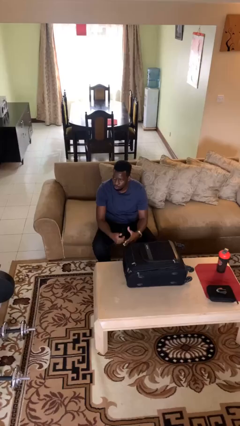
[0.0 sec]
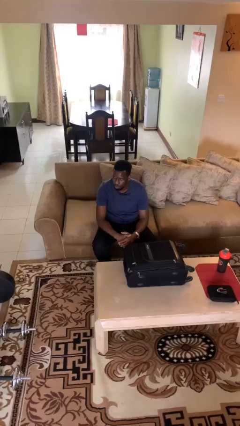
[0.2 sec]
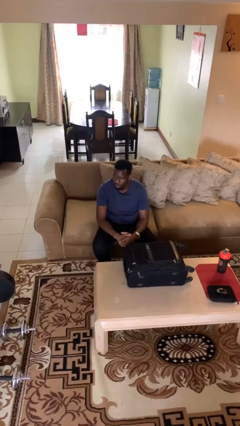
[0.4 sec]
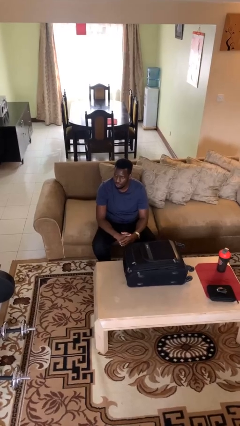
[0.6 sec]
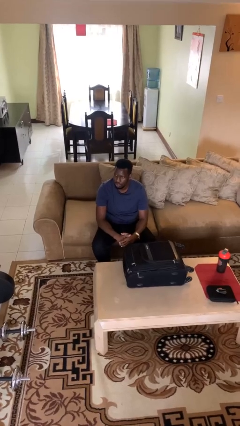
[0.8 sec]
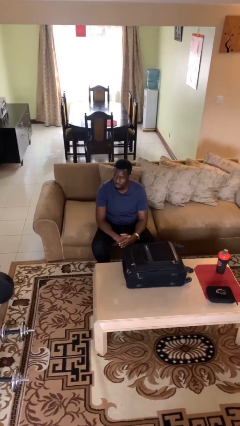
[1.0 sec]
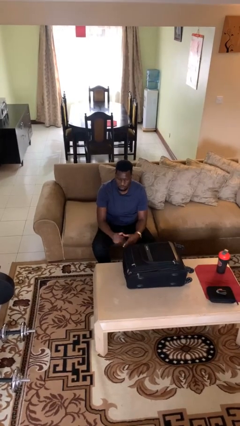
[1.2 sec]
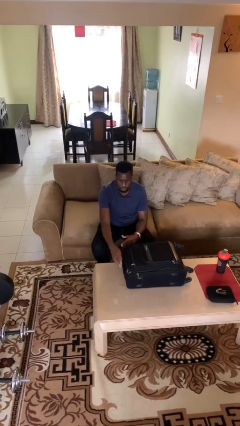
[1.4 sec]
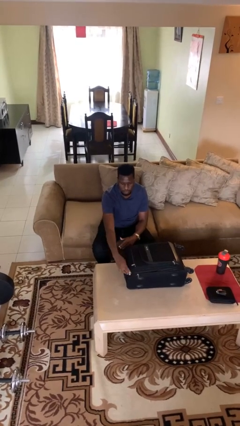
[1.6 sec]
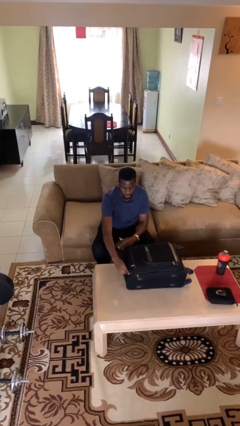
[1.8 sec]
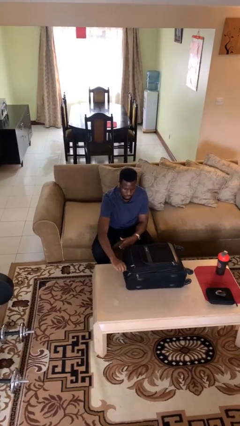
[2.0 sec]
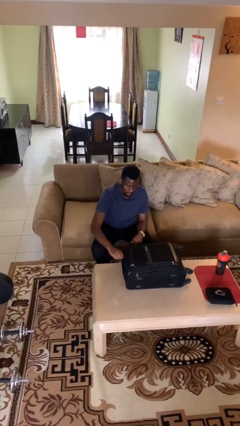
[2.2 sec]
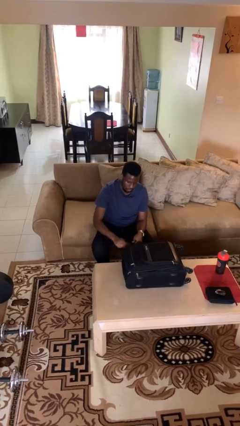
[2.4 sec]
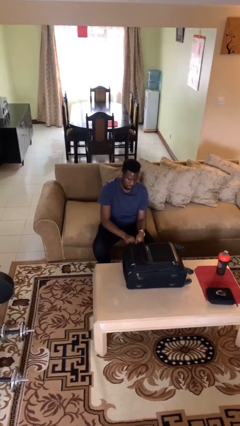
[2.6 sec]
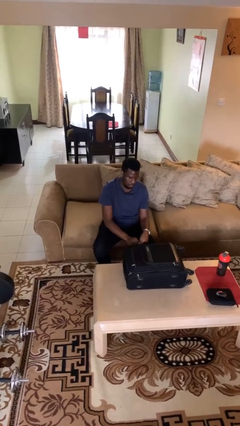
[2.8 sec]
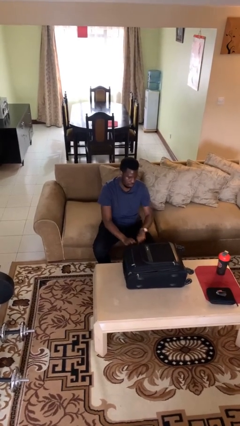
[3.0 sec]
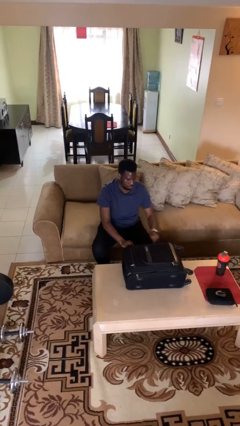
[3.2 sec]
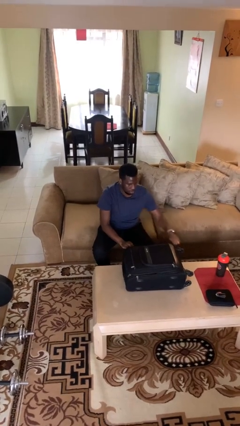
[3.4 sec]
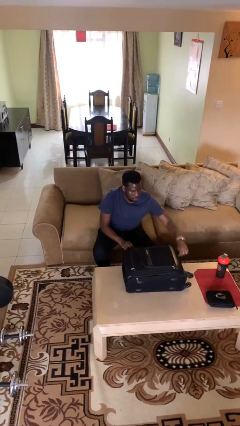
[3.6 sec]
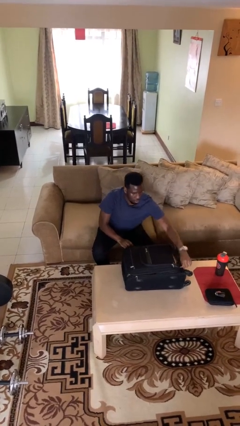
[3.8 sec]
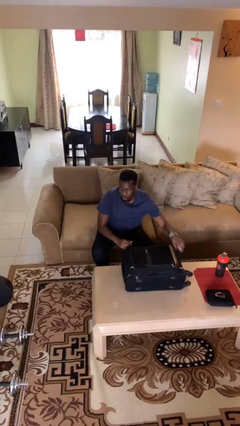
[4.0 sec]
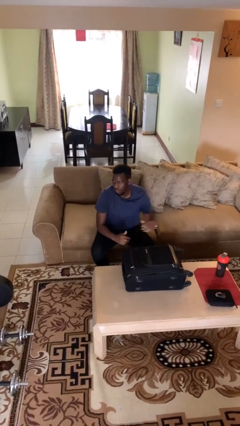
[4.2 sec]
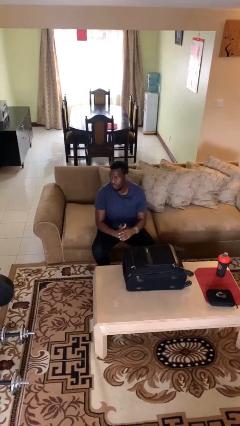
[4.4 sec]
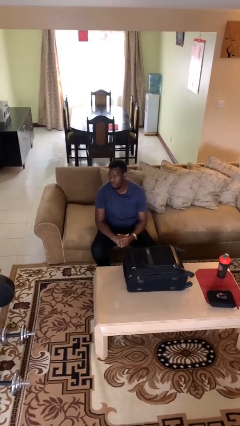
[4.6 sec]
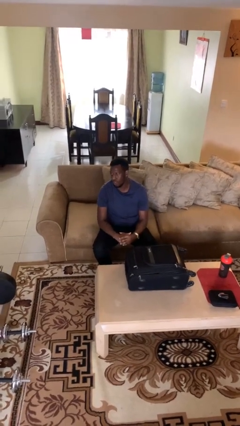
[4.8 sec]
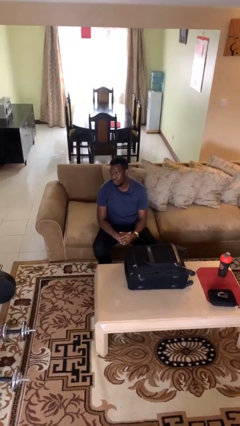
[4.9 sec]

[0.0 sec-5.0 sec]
person opens suitcase

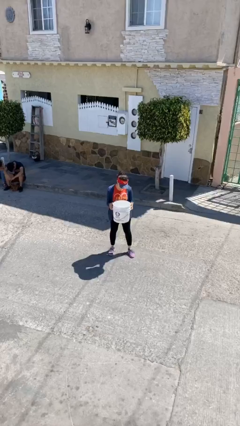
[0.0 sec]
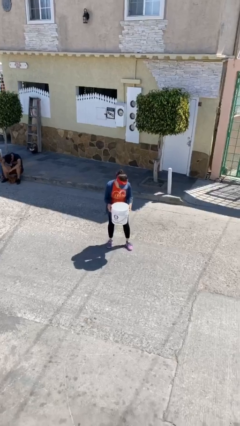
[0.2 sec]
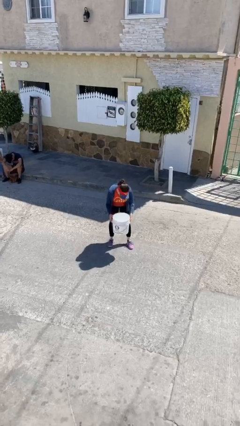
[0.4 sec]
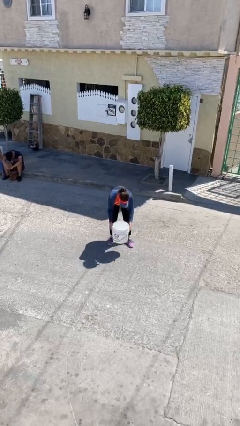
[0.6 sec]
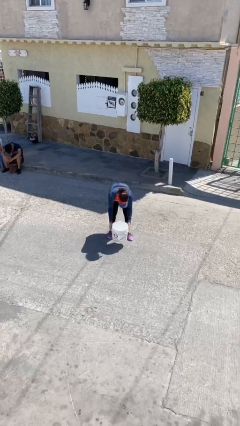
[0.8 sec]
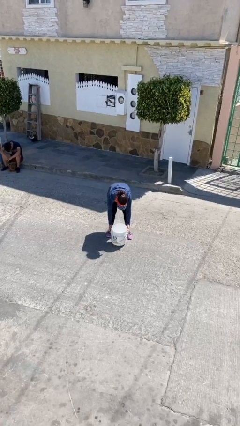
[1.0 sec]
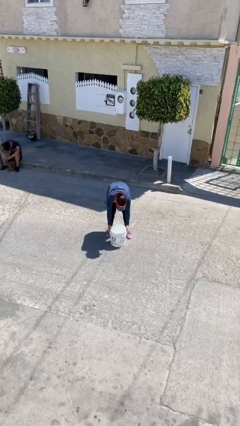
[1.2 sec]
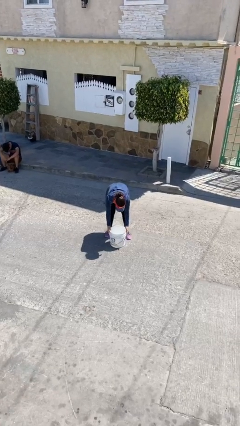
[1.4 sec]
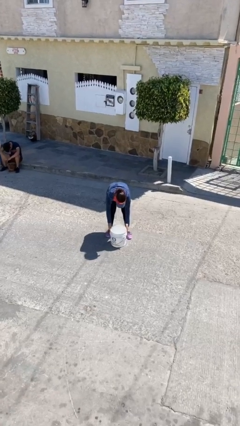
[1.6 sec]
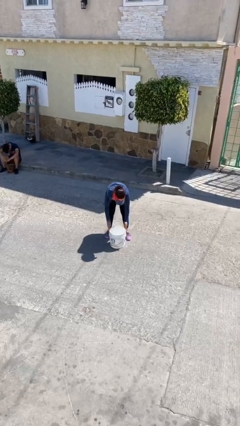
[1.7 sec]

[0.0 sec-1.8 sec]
person puts down object on floor

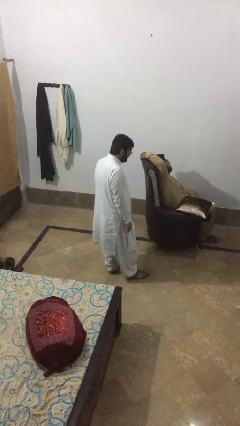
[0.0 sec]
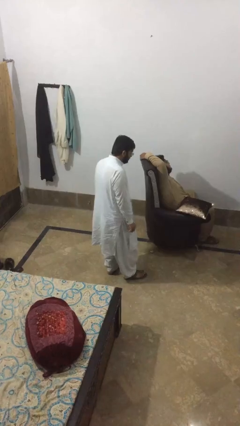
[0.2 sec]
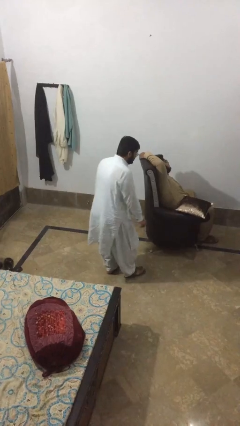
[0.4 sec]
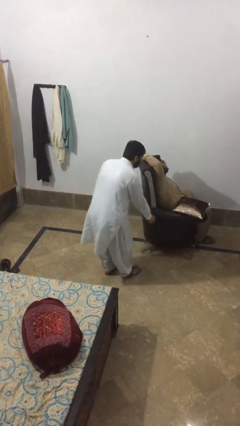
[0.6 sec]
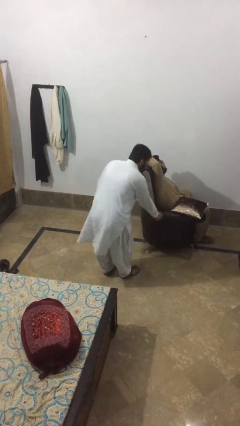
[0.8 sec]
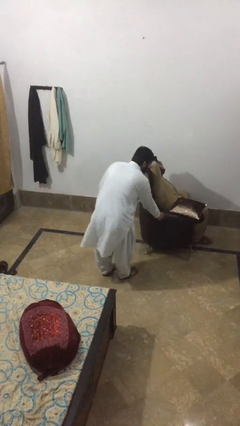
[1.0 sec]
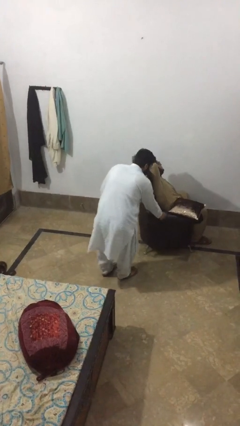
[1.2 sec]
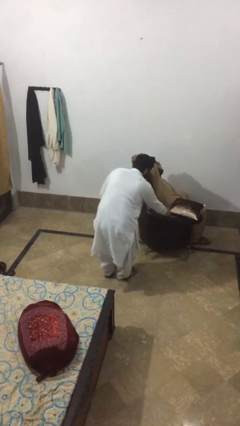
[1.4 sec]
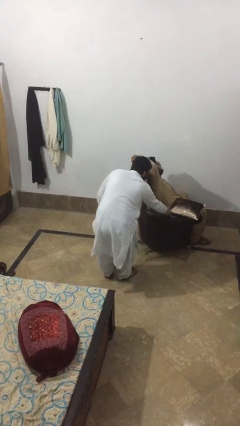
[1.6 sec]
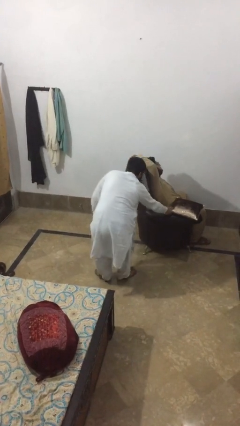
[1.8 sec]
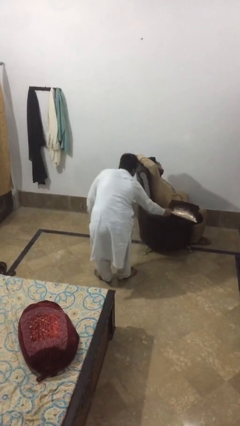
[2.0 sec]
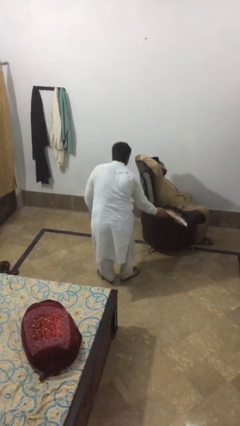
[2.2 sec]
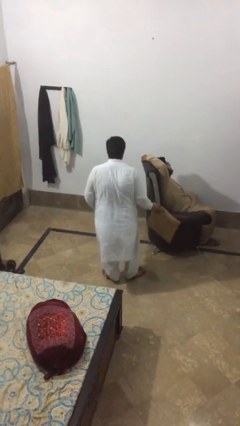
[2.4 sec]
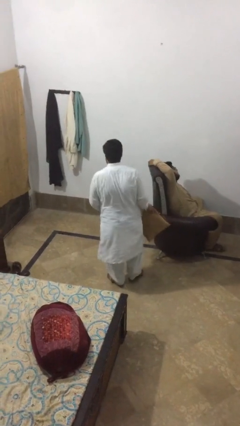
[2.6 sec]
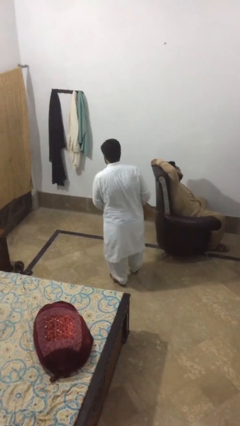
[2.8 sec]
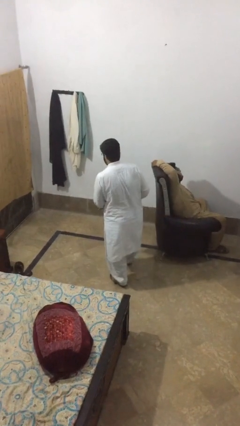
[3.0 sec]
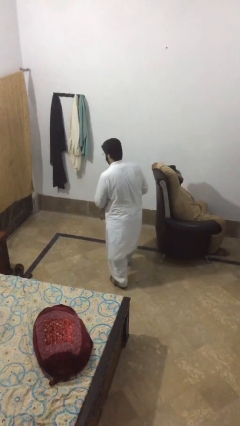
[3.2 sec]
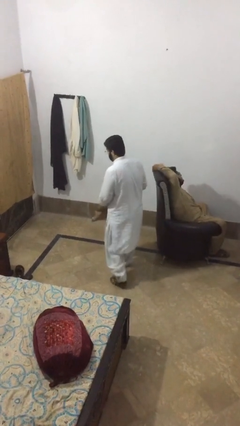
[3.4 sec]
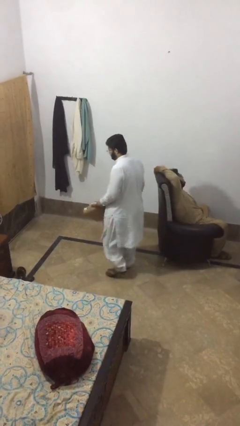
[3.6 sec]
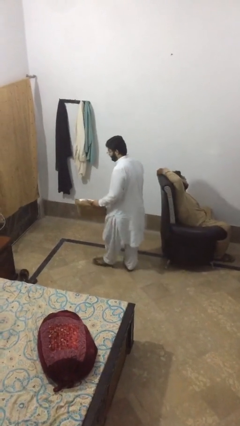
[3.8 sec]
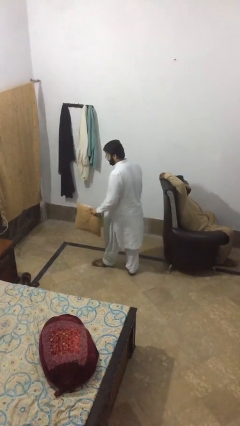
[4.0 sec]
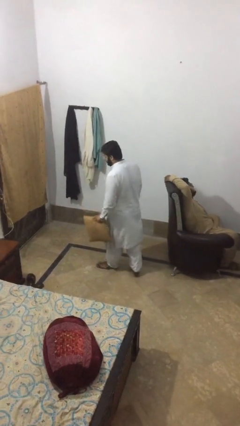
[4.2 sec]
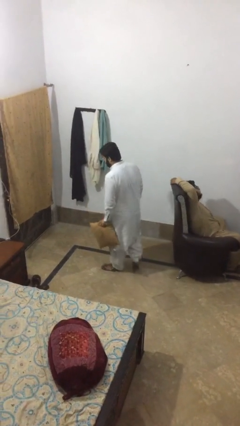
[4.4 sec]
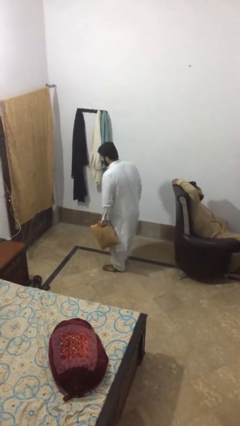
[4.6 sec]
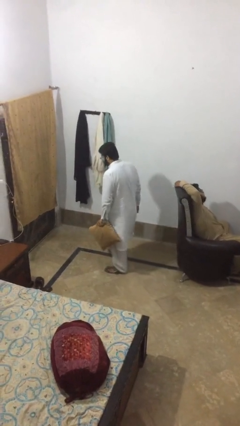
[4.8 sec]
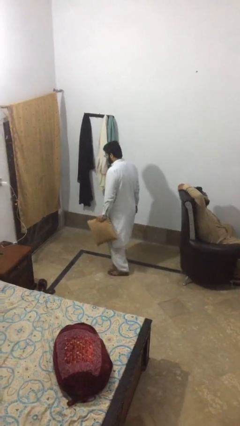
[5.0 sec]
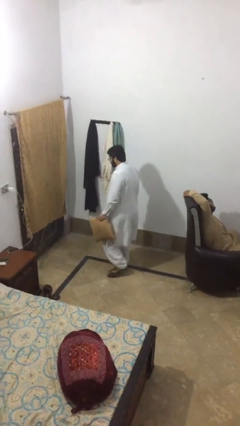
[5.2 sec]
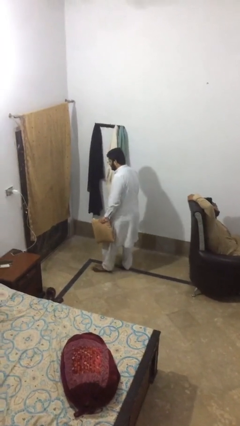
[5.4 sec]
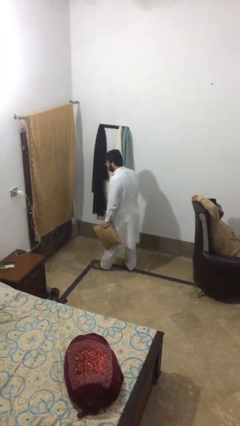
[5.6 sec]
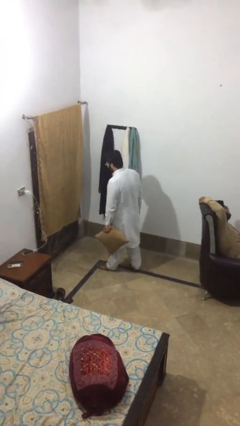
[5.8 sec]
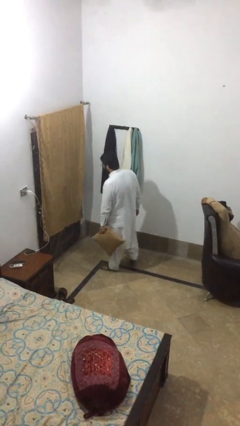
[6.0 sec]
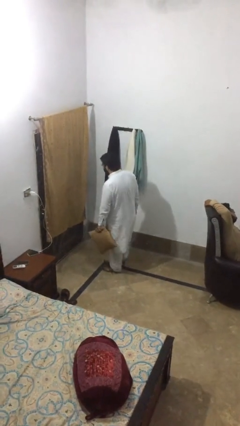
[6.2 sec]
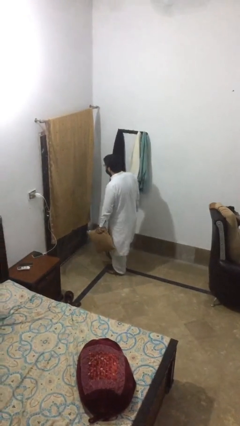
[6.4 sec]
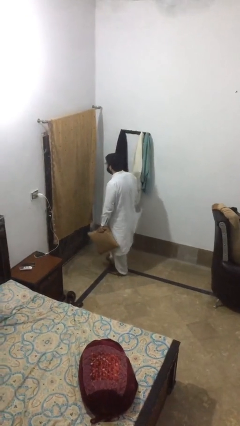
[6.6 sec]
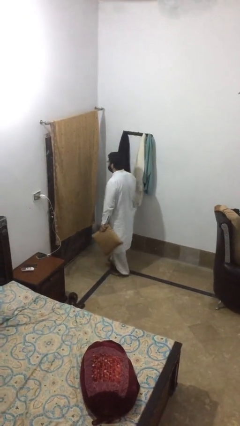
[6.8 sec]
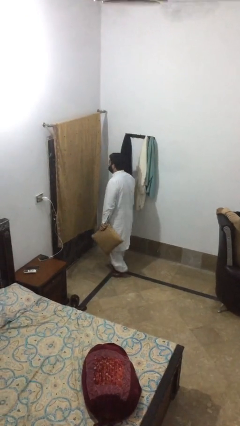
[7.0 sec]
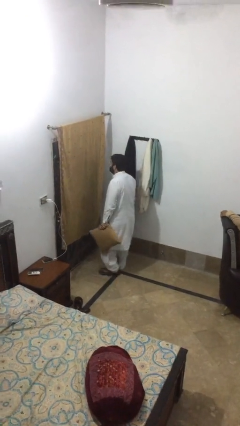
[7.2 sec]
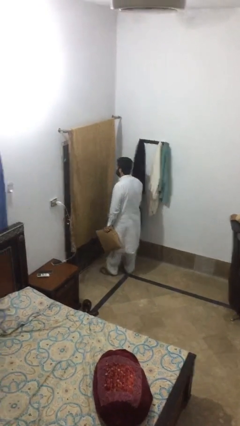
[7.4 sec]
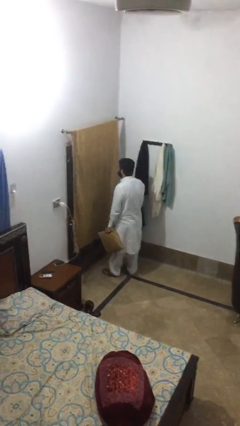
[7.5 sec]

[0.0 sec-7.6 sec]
person steals object from person

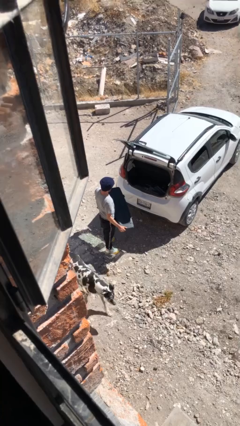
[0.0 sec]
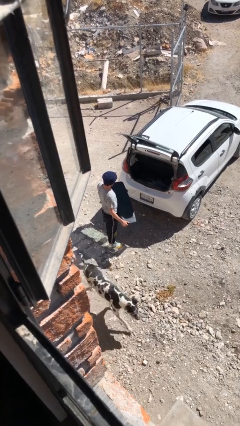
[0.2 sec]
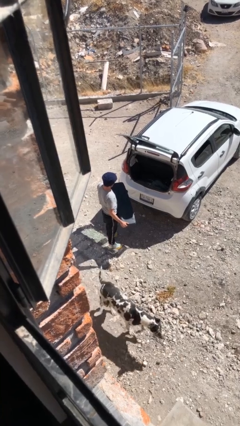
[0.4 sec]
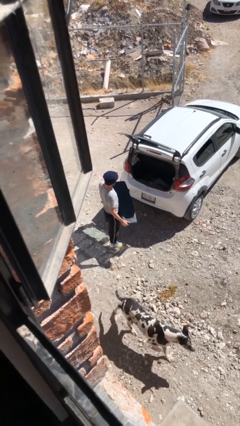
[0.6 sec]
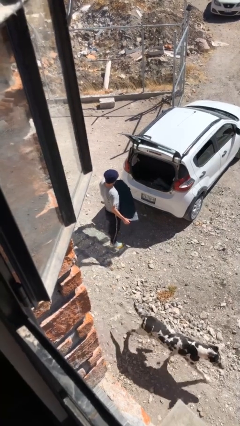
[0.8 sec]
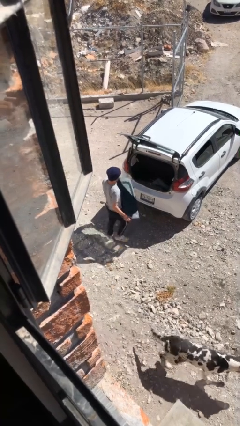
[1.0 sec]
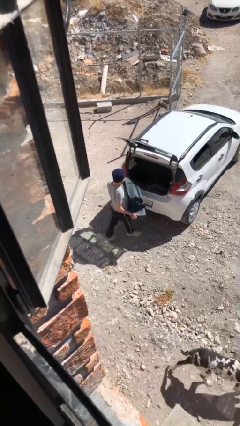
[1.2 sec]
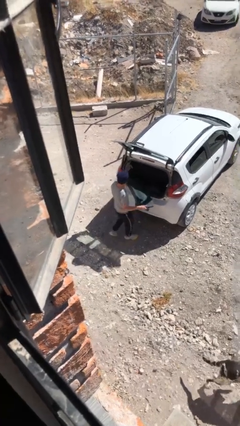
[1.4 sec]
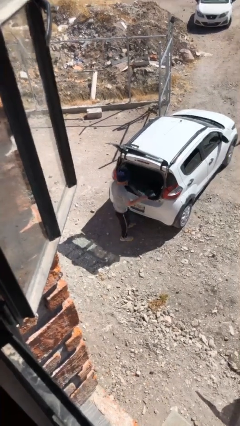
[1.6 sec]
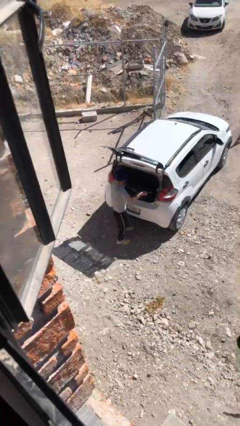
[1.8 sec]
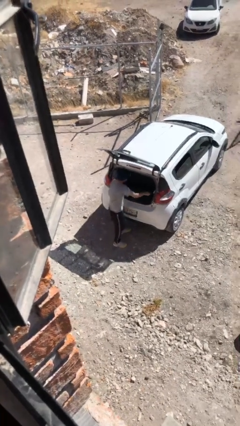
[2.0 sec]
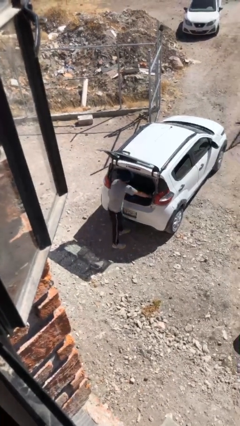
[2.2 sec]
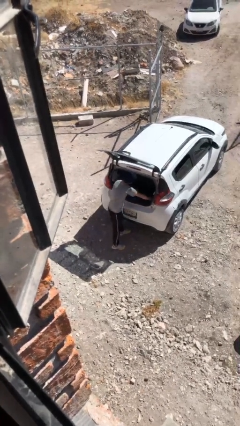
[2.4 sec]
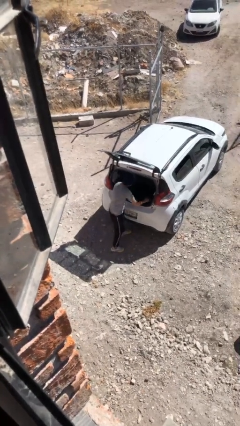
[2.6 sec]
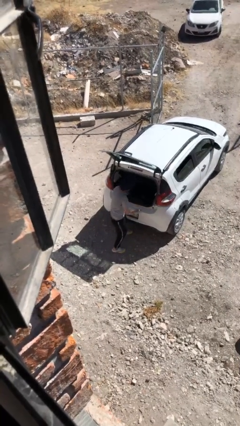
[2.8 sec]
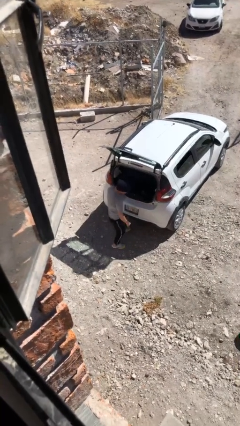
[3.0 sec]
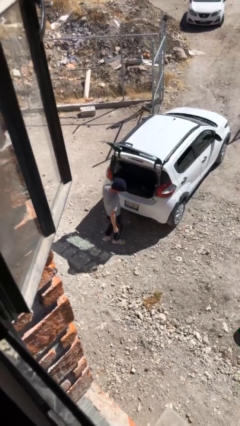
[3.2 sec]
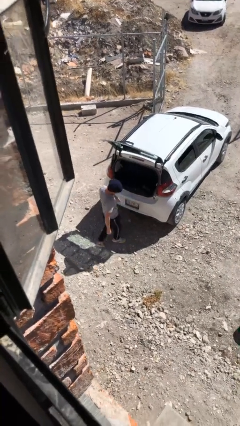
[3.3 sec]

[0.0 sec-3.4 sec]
person loads car
